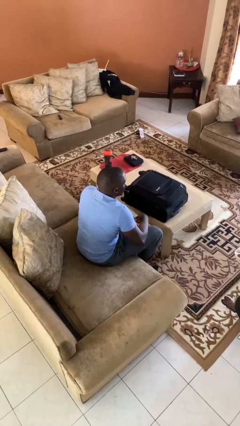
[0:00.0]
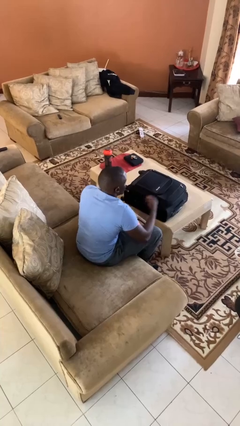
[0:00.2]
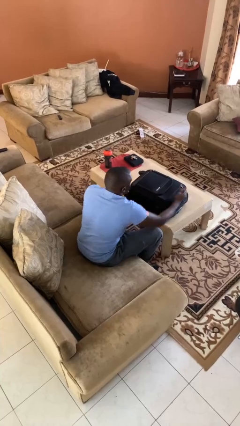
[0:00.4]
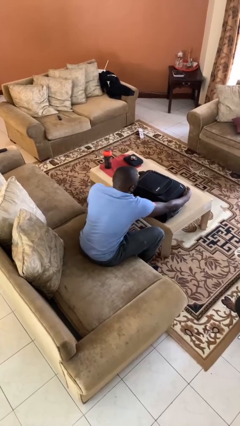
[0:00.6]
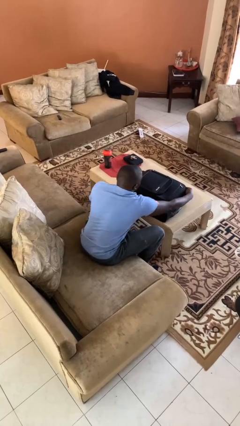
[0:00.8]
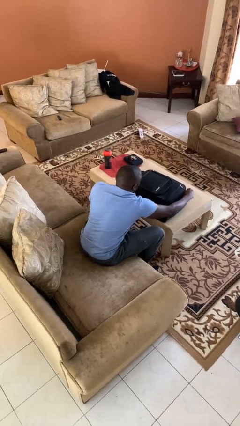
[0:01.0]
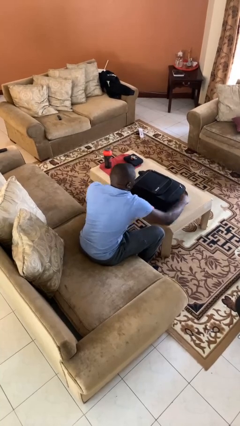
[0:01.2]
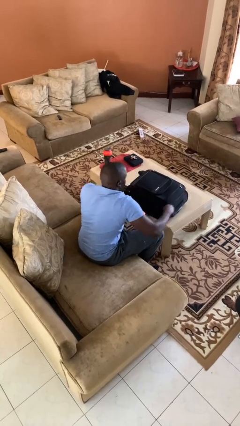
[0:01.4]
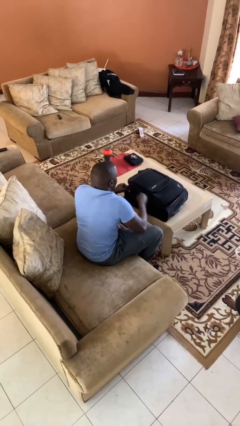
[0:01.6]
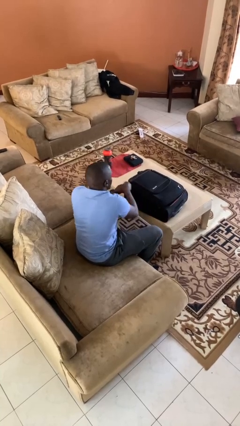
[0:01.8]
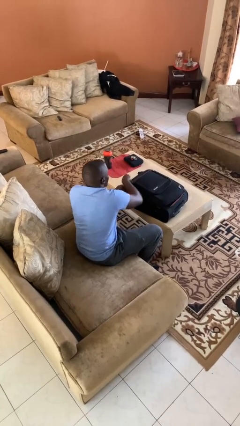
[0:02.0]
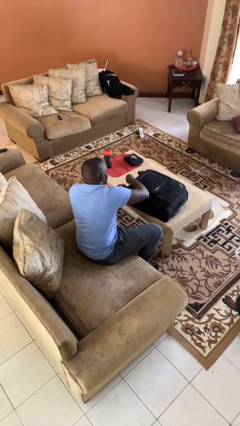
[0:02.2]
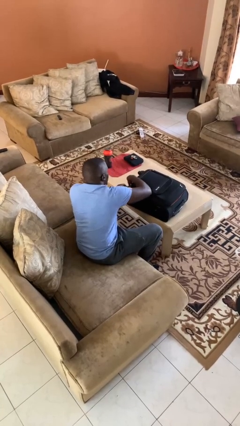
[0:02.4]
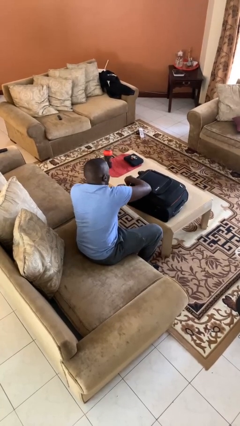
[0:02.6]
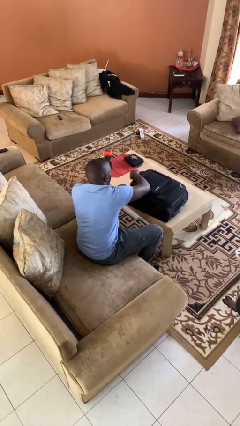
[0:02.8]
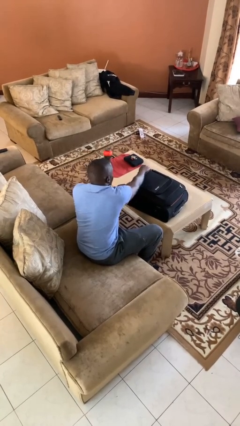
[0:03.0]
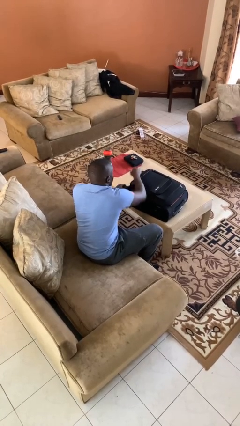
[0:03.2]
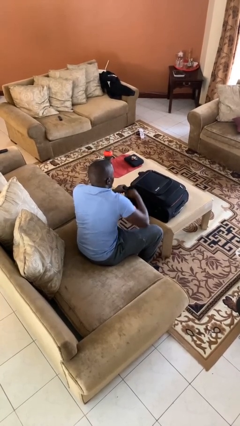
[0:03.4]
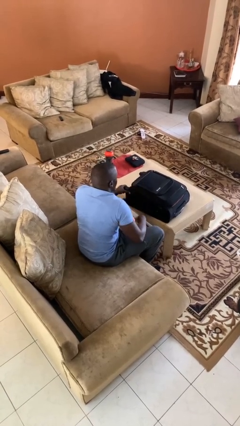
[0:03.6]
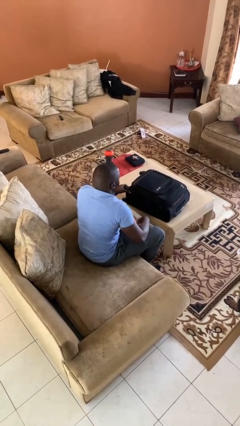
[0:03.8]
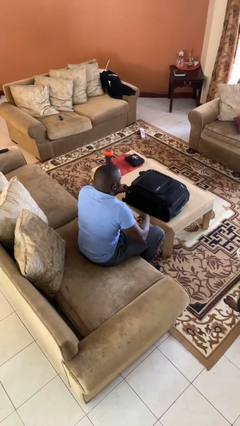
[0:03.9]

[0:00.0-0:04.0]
person closes suitcase

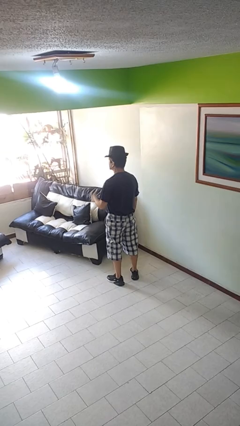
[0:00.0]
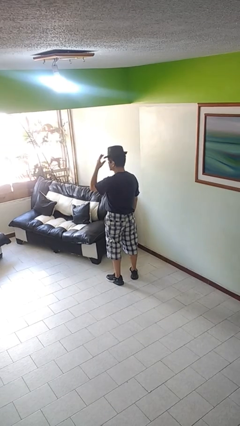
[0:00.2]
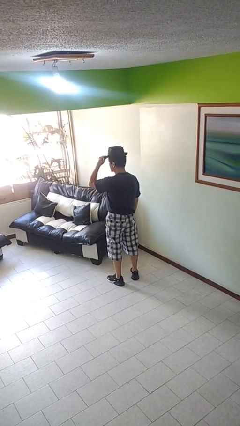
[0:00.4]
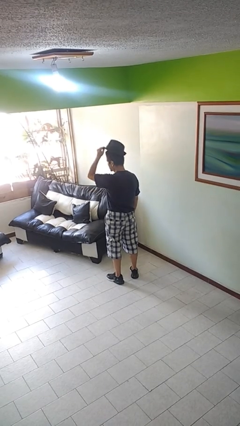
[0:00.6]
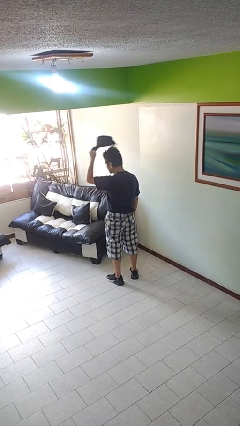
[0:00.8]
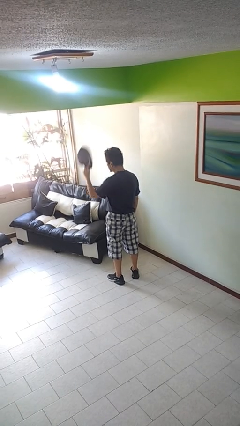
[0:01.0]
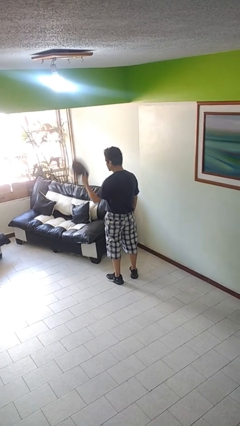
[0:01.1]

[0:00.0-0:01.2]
person takes off hat

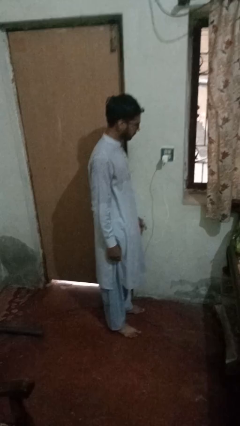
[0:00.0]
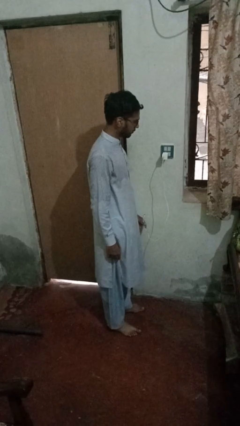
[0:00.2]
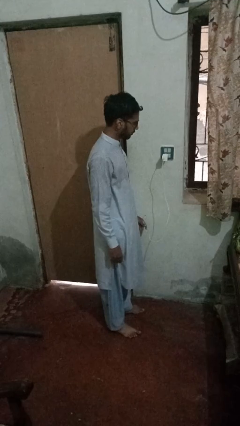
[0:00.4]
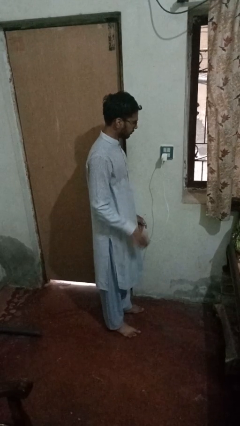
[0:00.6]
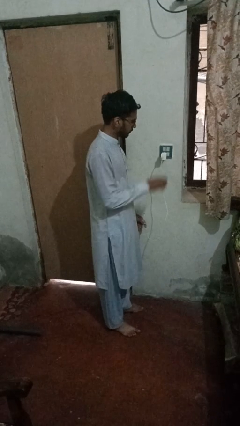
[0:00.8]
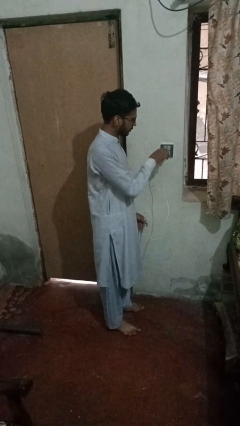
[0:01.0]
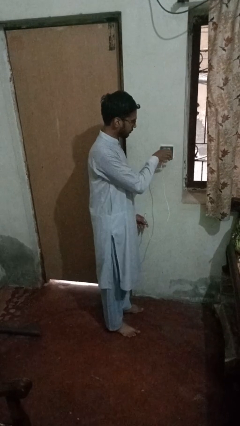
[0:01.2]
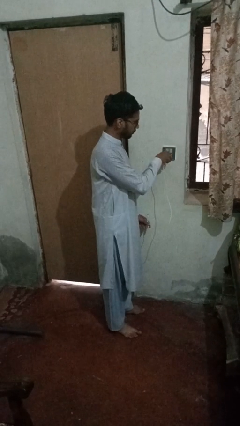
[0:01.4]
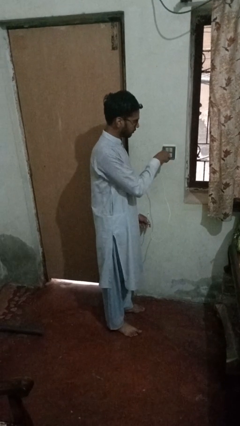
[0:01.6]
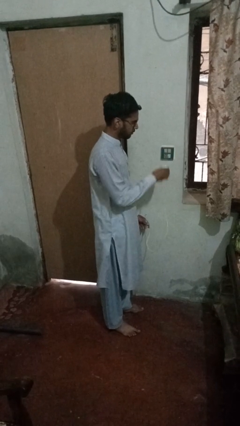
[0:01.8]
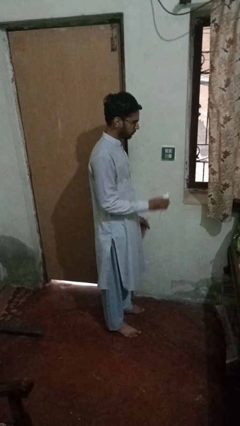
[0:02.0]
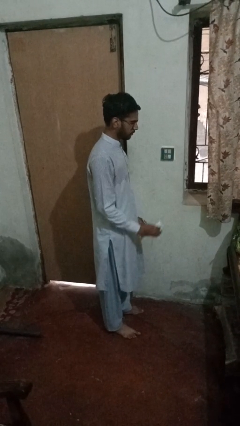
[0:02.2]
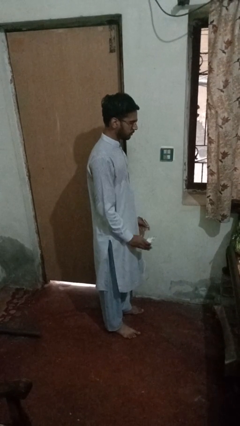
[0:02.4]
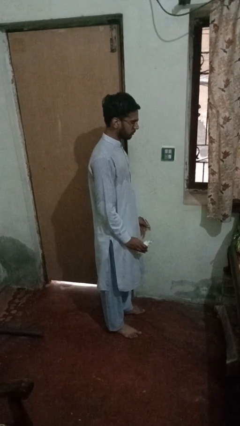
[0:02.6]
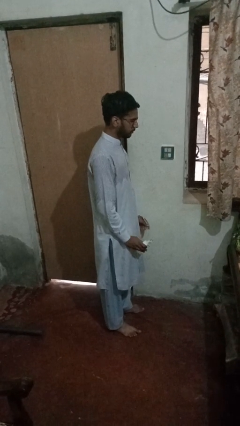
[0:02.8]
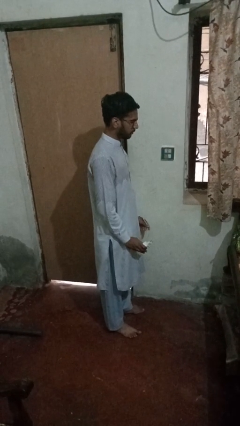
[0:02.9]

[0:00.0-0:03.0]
person unplugs from electrical socket

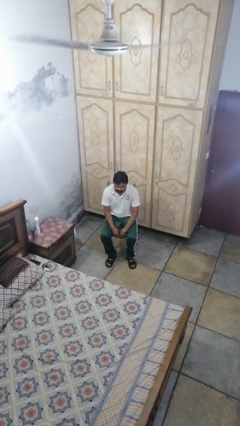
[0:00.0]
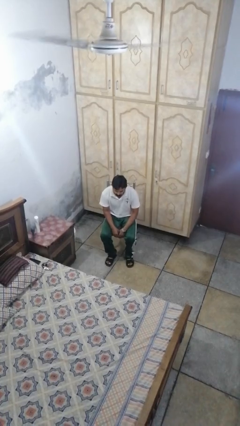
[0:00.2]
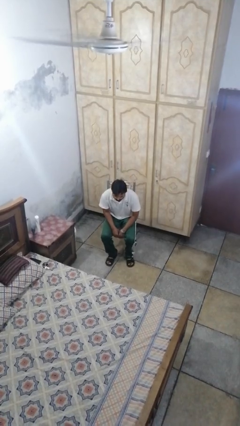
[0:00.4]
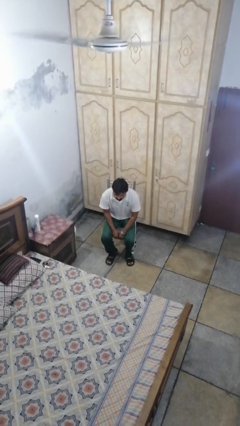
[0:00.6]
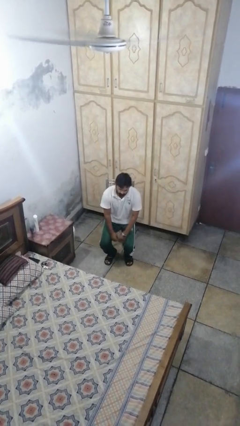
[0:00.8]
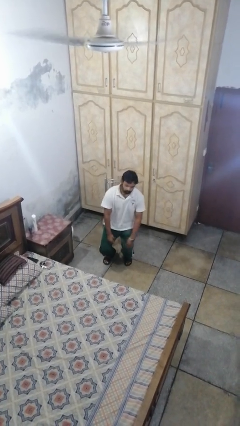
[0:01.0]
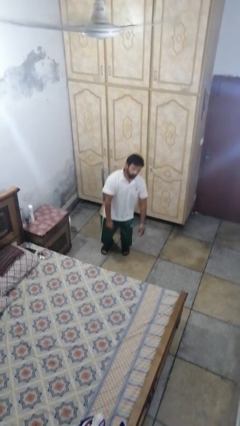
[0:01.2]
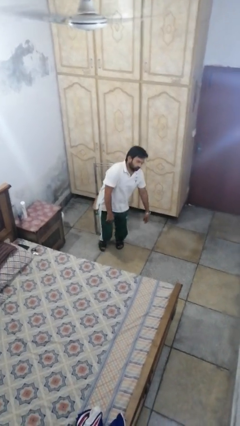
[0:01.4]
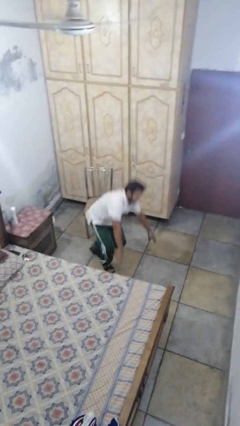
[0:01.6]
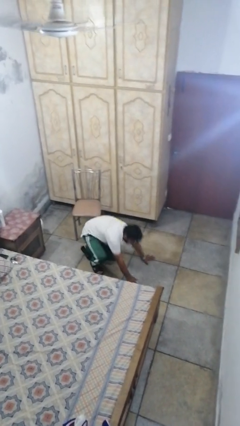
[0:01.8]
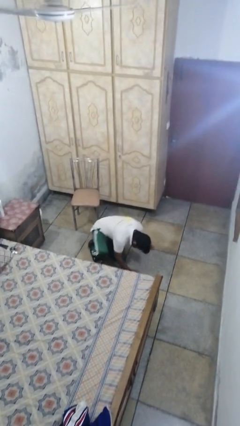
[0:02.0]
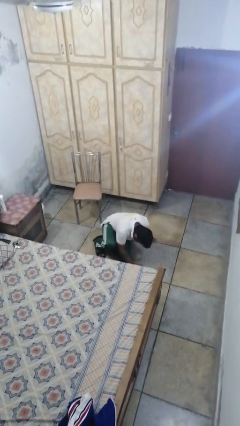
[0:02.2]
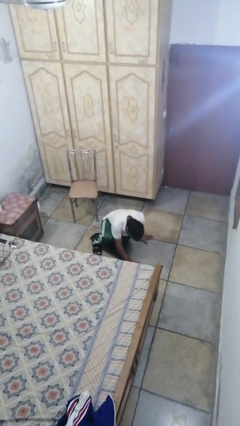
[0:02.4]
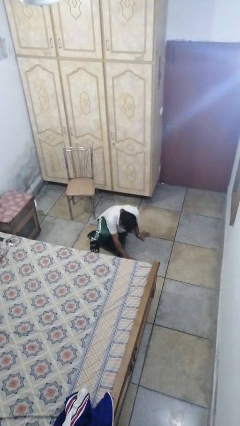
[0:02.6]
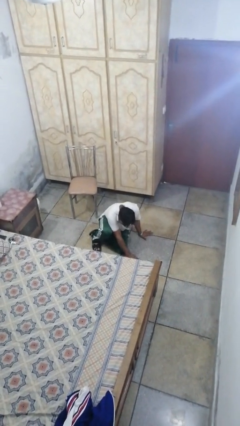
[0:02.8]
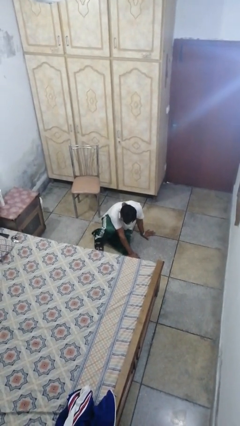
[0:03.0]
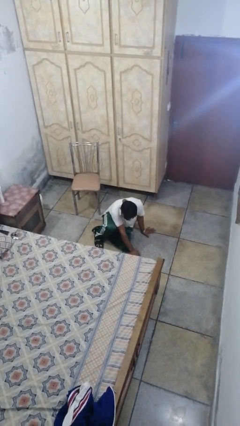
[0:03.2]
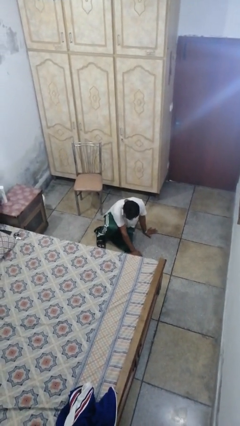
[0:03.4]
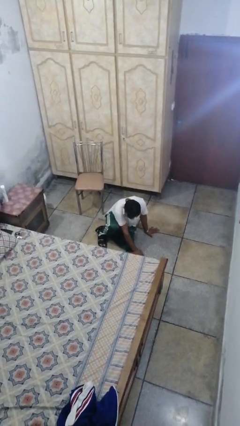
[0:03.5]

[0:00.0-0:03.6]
person falls from chair

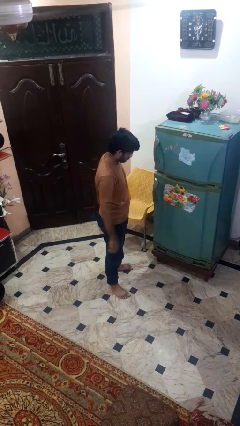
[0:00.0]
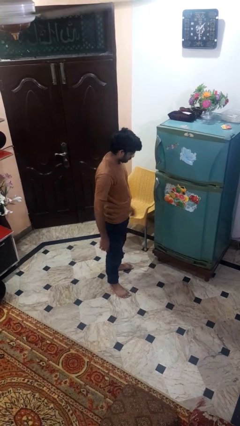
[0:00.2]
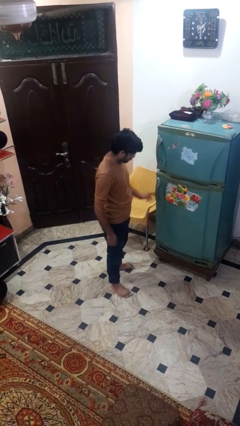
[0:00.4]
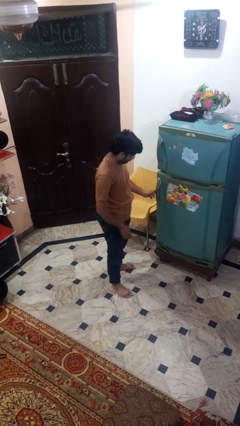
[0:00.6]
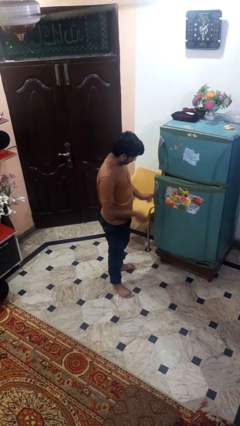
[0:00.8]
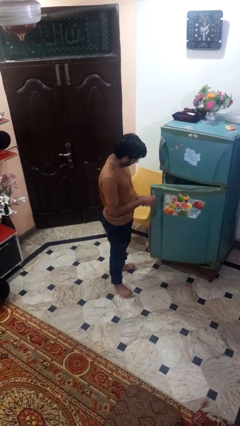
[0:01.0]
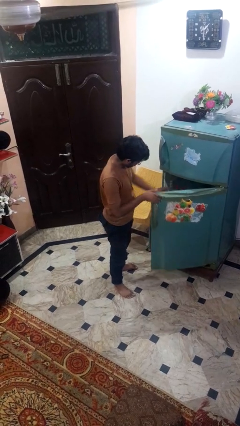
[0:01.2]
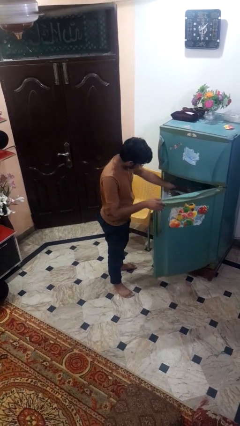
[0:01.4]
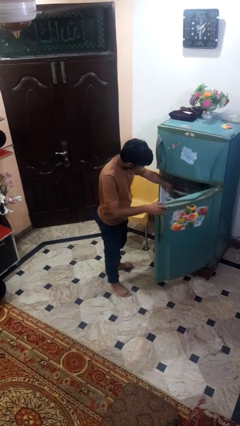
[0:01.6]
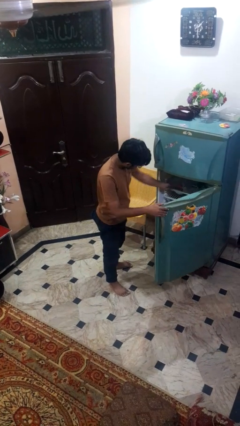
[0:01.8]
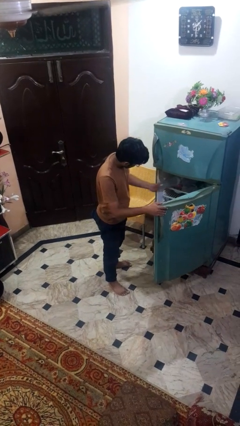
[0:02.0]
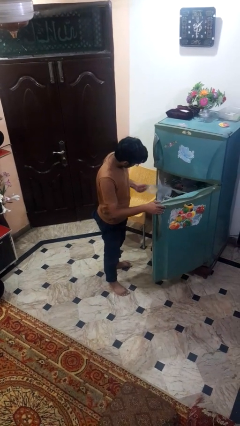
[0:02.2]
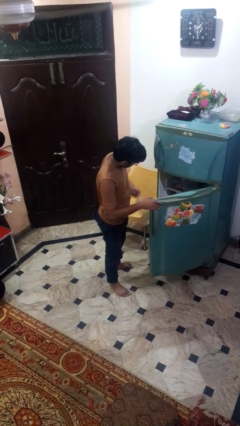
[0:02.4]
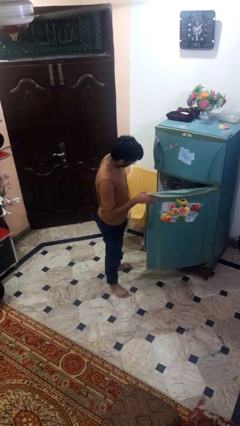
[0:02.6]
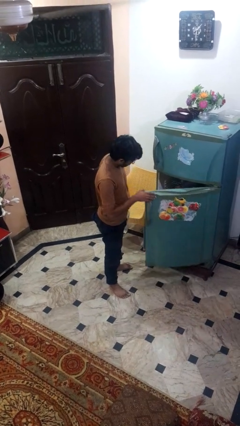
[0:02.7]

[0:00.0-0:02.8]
person takes object from refrigerator

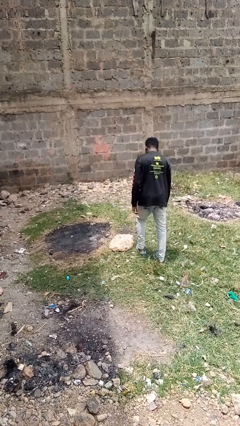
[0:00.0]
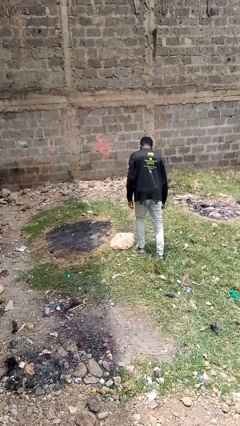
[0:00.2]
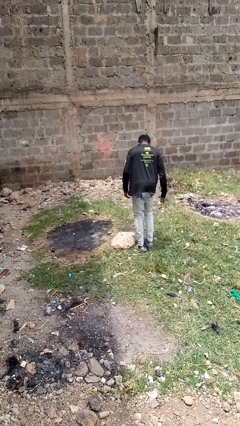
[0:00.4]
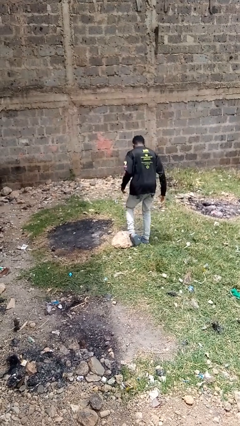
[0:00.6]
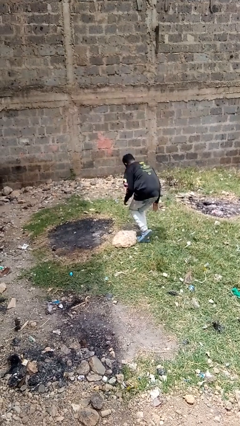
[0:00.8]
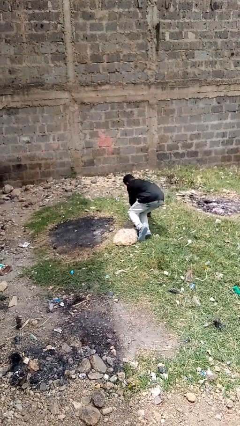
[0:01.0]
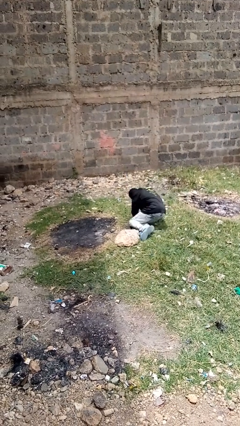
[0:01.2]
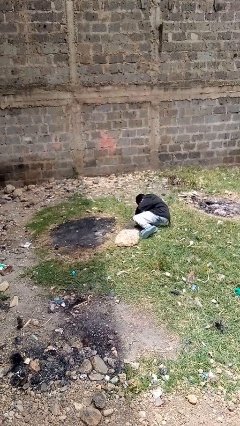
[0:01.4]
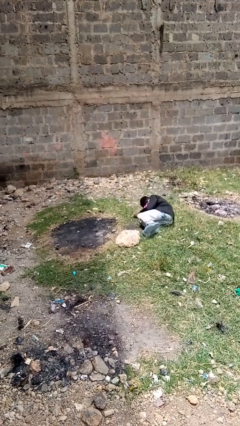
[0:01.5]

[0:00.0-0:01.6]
person trips on object on floor

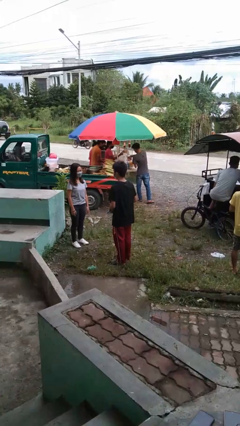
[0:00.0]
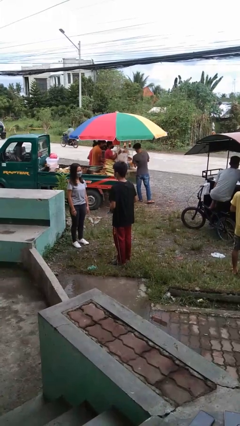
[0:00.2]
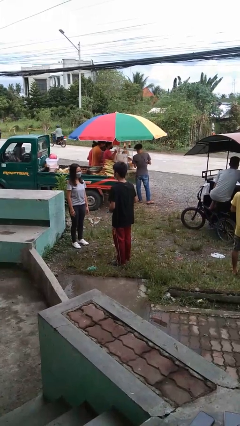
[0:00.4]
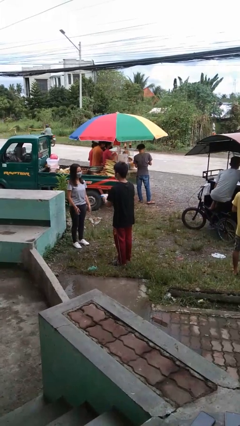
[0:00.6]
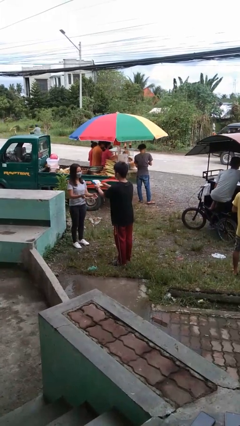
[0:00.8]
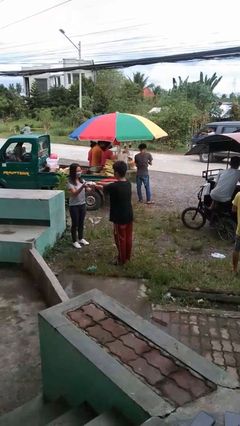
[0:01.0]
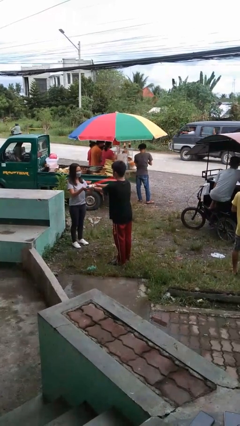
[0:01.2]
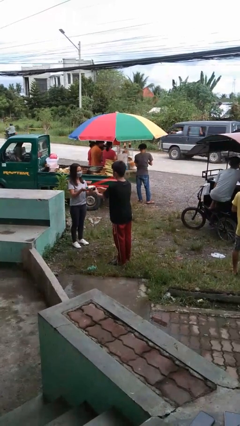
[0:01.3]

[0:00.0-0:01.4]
person transfers object to person
